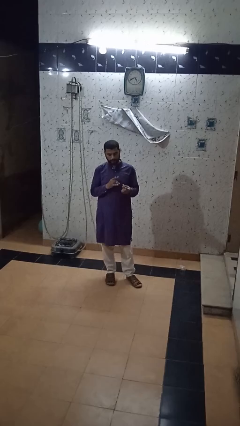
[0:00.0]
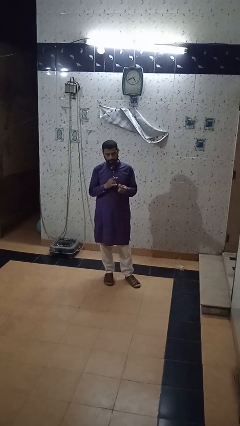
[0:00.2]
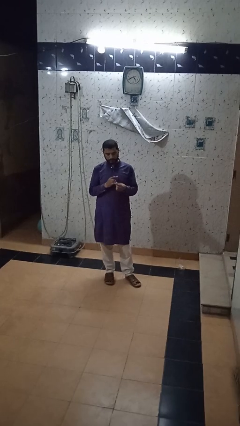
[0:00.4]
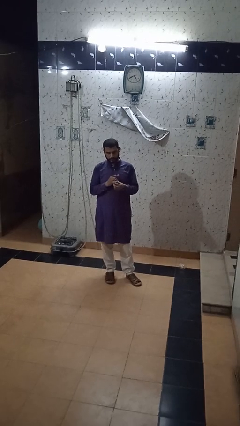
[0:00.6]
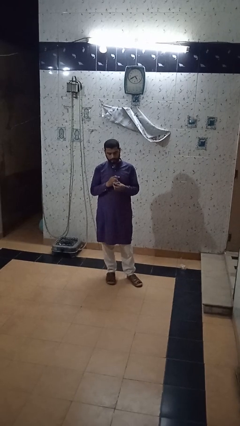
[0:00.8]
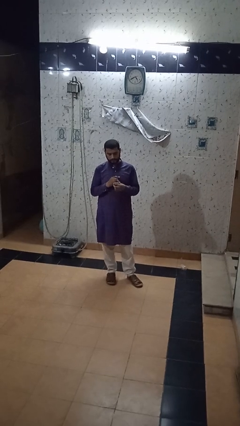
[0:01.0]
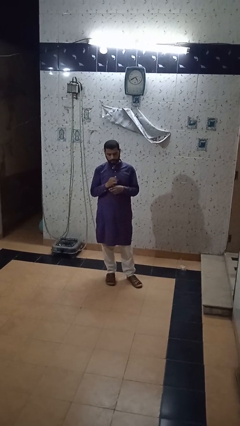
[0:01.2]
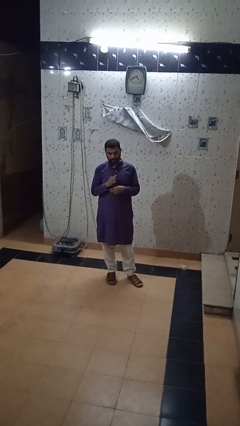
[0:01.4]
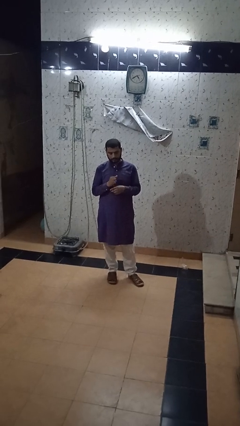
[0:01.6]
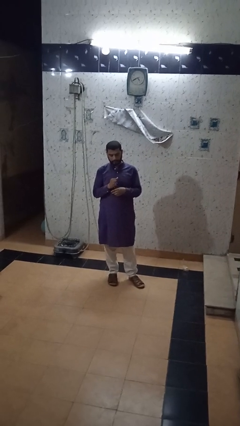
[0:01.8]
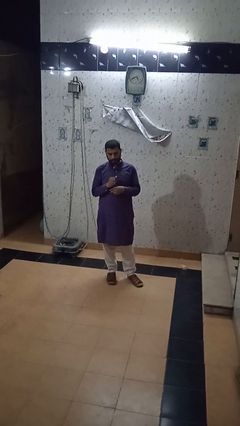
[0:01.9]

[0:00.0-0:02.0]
person puts on ring

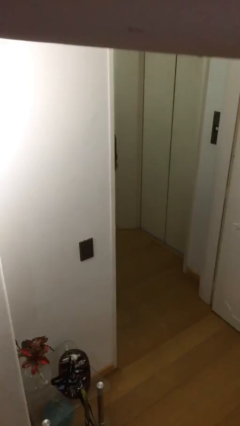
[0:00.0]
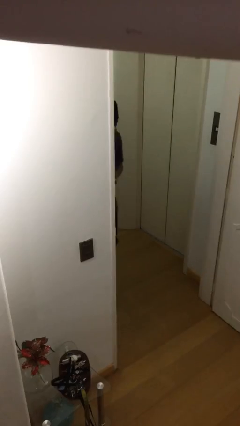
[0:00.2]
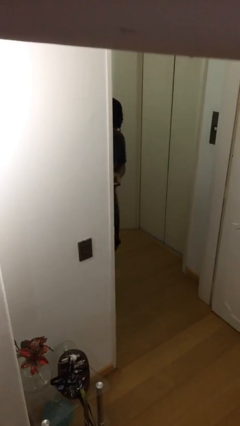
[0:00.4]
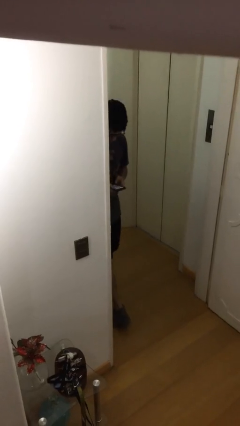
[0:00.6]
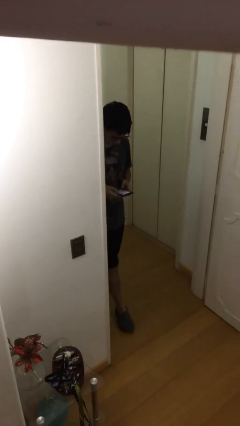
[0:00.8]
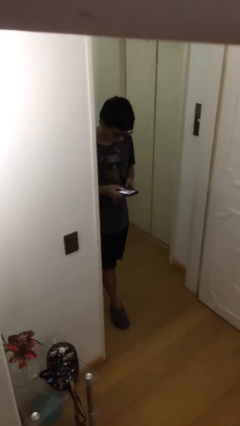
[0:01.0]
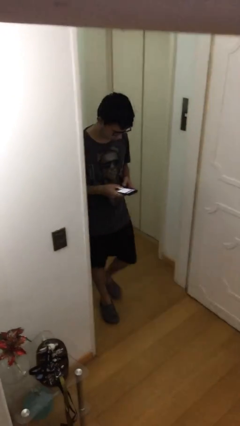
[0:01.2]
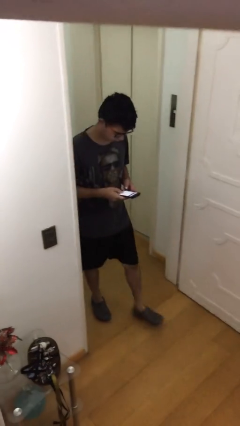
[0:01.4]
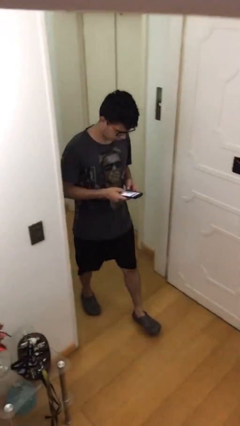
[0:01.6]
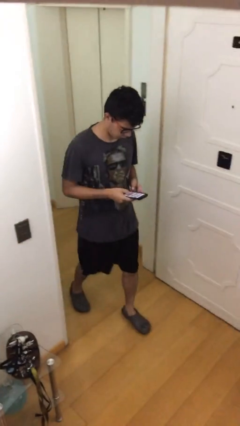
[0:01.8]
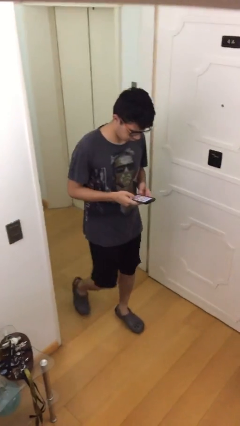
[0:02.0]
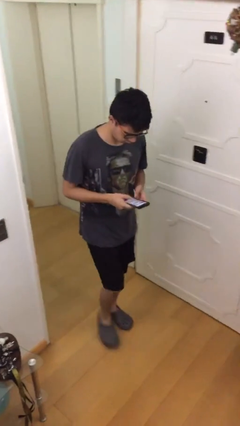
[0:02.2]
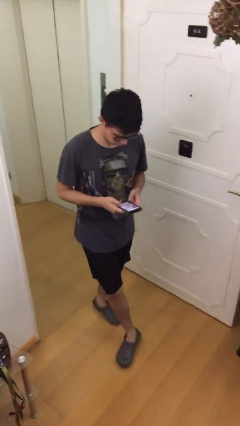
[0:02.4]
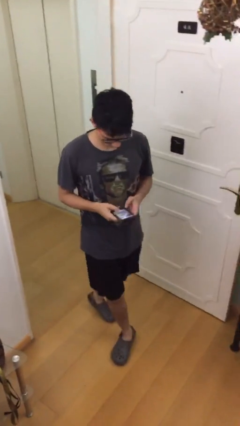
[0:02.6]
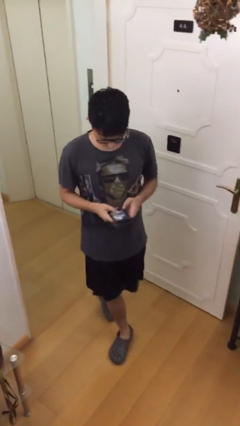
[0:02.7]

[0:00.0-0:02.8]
person enters scene through structure

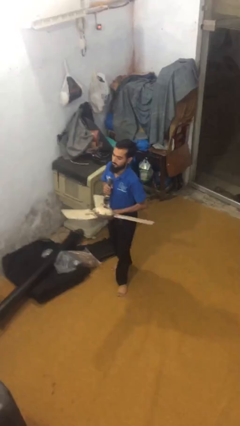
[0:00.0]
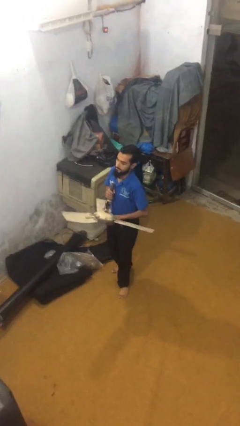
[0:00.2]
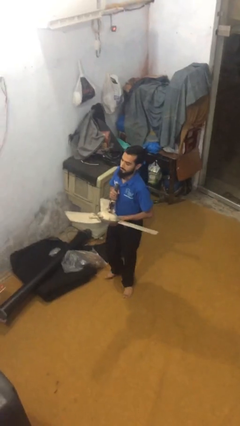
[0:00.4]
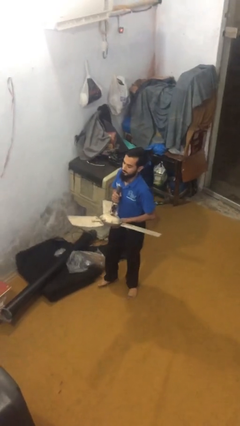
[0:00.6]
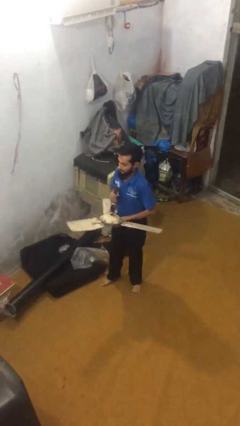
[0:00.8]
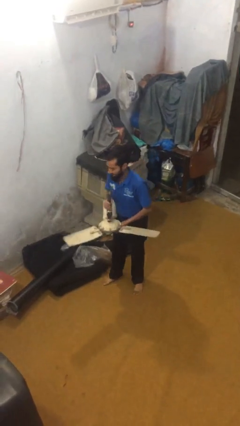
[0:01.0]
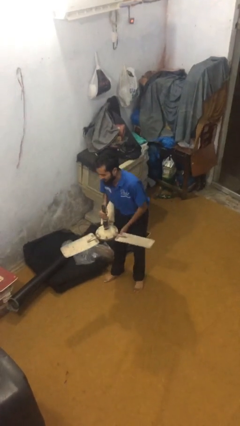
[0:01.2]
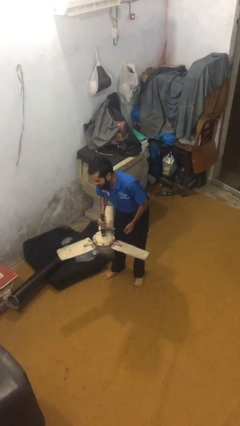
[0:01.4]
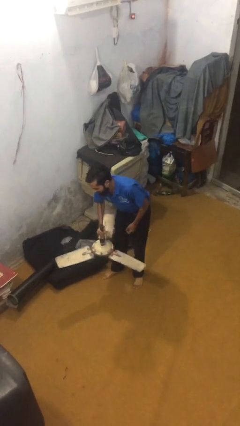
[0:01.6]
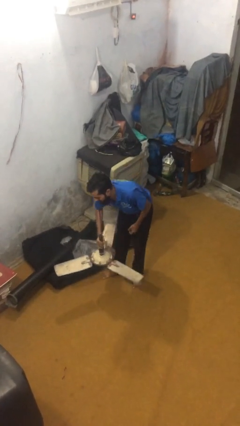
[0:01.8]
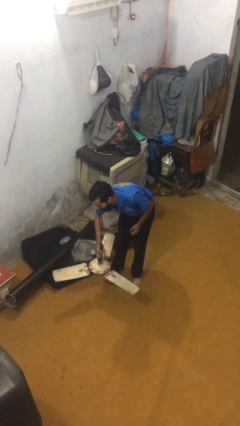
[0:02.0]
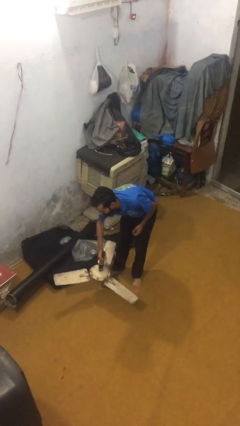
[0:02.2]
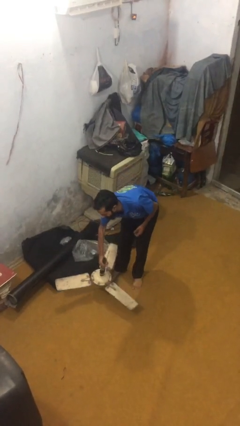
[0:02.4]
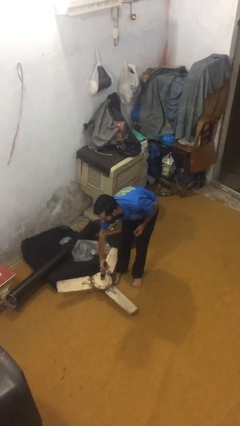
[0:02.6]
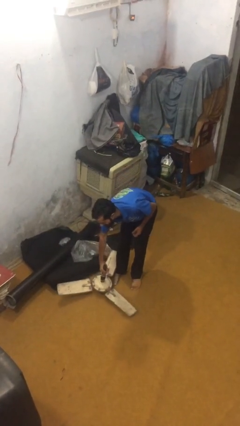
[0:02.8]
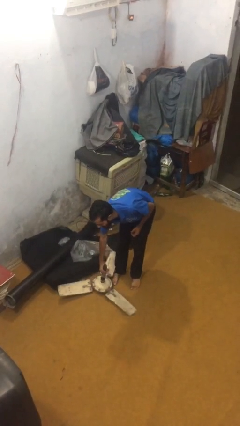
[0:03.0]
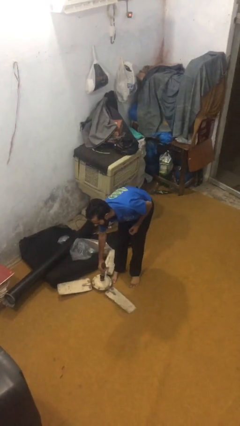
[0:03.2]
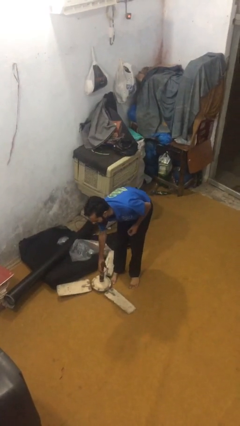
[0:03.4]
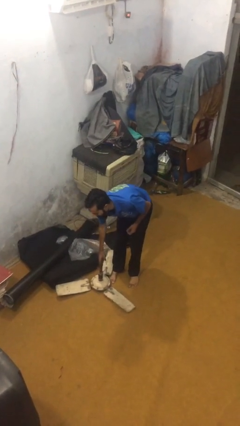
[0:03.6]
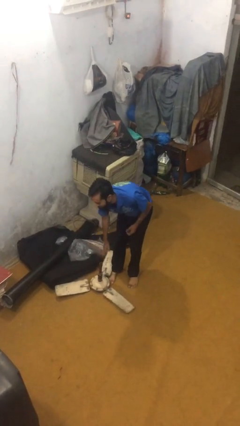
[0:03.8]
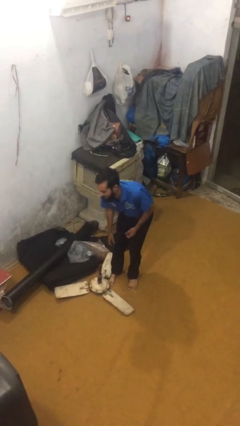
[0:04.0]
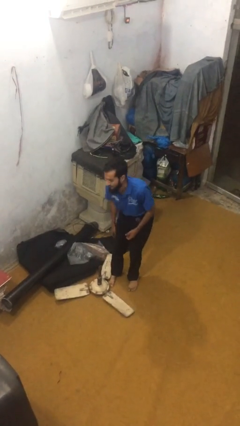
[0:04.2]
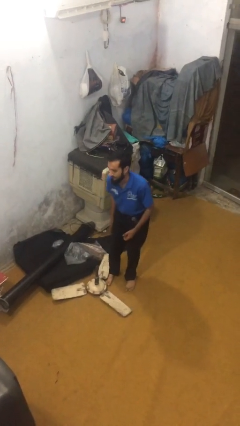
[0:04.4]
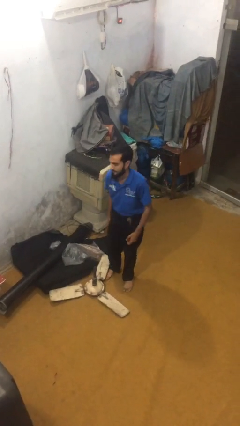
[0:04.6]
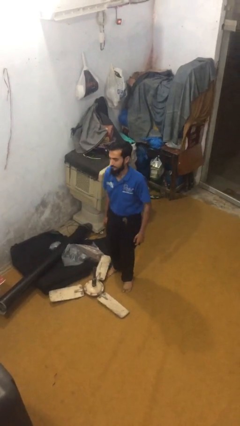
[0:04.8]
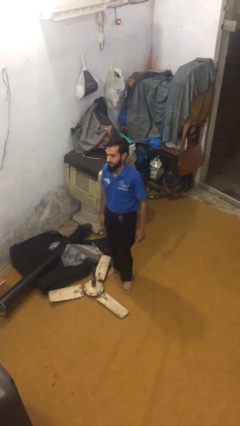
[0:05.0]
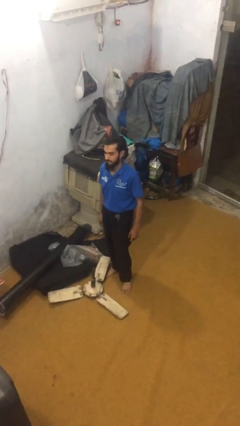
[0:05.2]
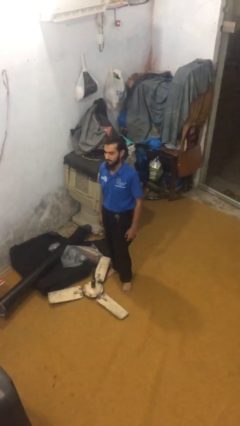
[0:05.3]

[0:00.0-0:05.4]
person puts down object on floor

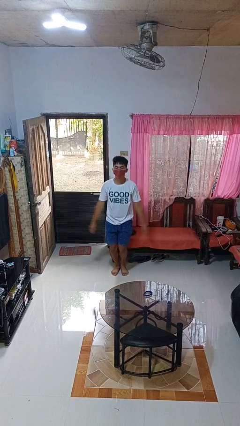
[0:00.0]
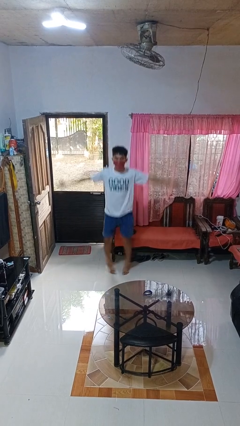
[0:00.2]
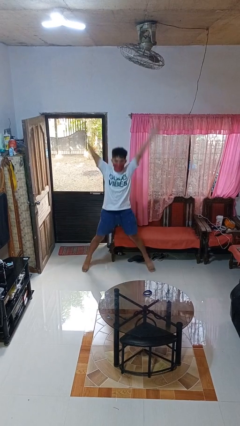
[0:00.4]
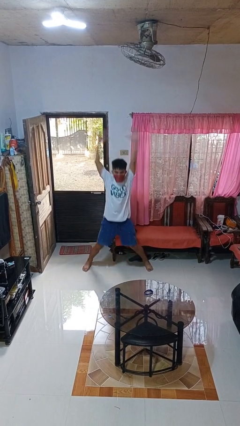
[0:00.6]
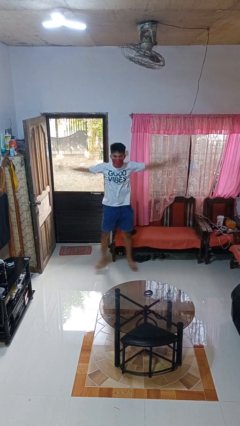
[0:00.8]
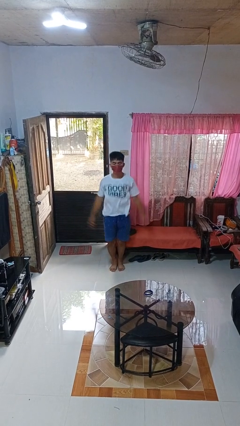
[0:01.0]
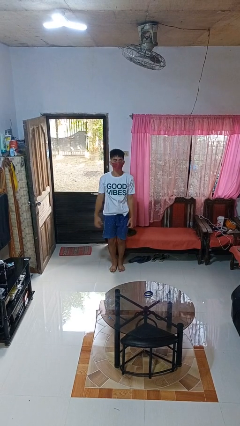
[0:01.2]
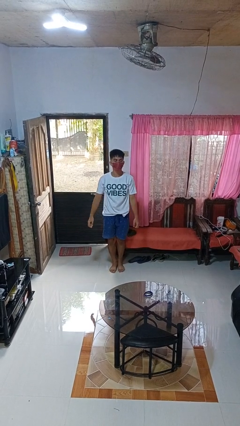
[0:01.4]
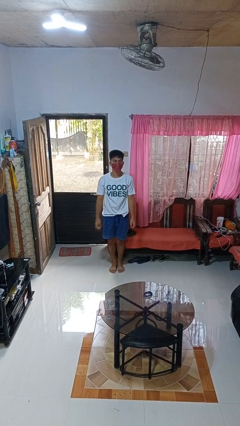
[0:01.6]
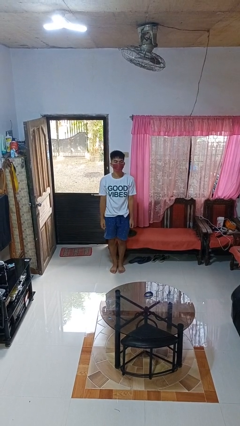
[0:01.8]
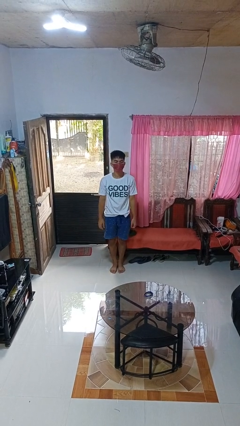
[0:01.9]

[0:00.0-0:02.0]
person exercises with jumping jacks

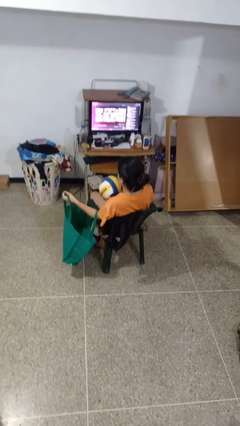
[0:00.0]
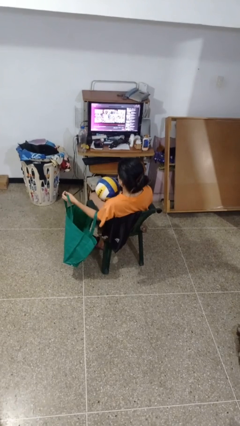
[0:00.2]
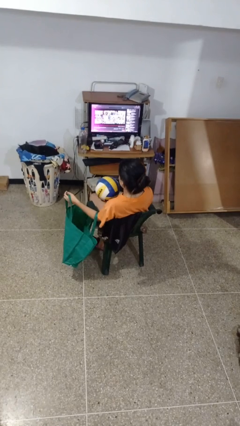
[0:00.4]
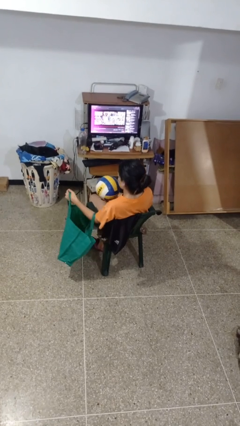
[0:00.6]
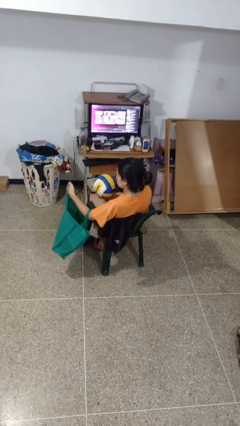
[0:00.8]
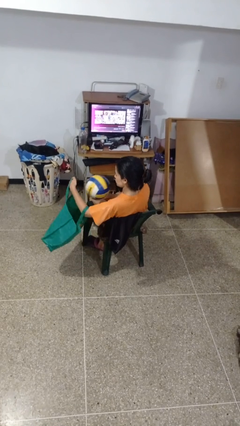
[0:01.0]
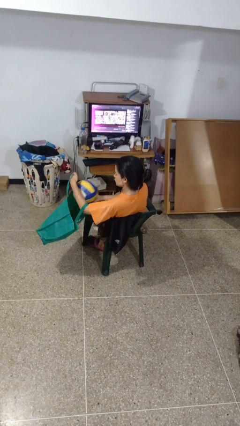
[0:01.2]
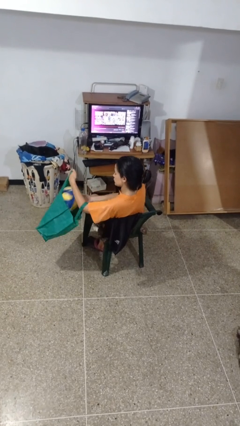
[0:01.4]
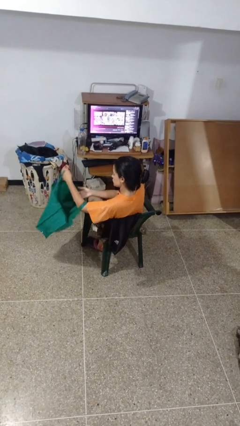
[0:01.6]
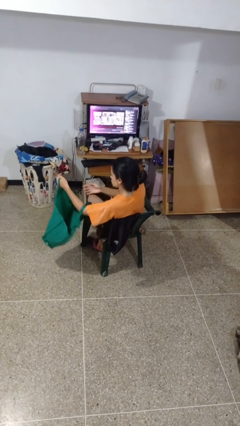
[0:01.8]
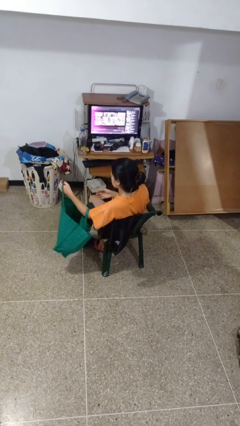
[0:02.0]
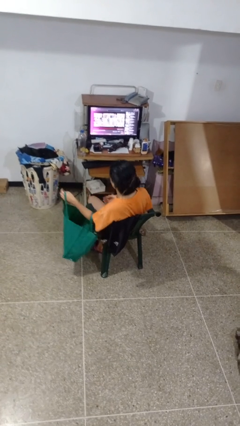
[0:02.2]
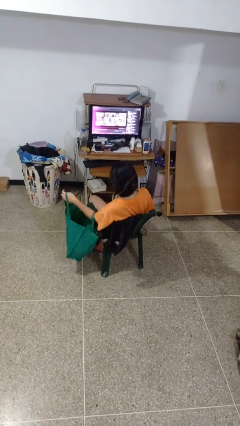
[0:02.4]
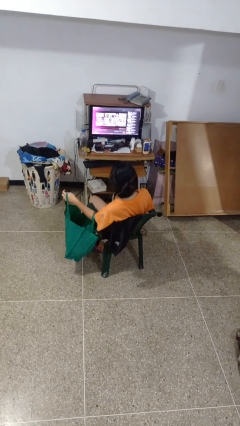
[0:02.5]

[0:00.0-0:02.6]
person puts object into bag

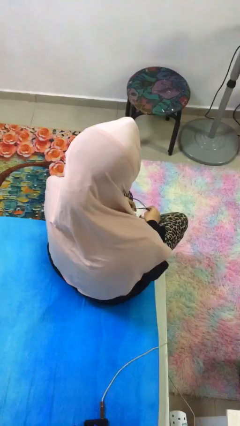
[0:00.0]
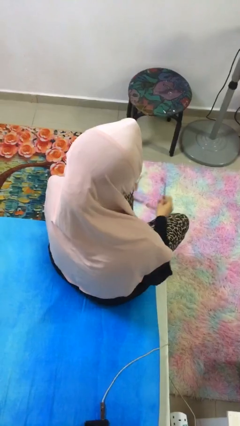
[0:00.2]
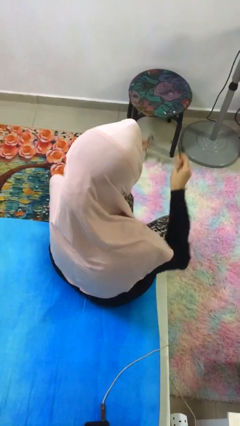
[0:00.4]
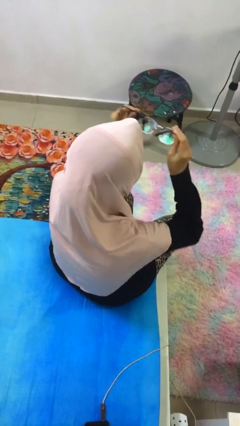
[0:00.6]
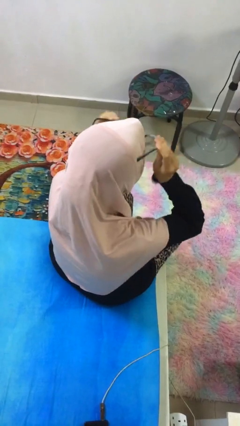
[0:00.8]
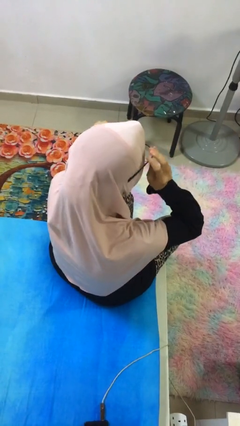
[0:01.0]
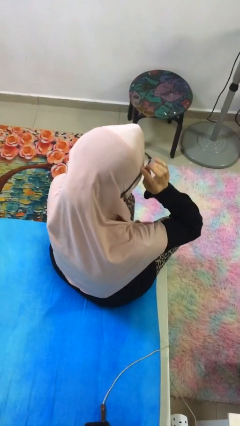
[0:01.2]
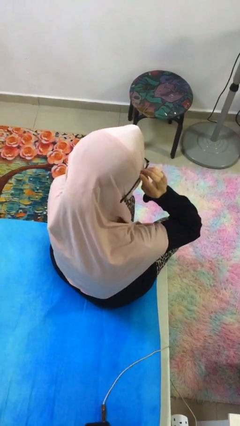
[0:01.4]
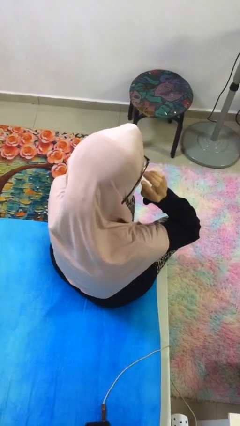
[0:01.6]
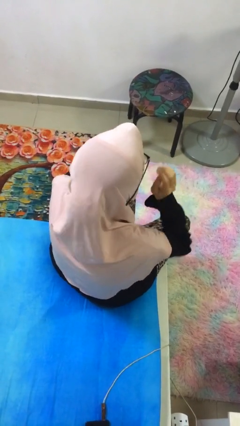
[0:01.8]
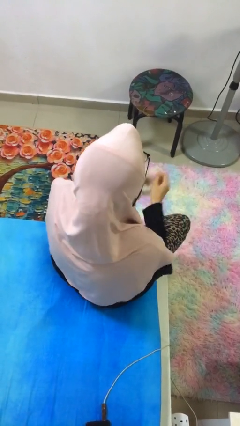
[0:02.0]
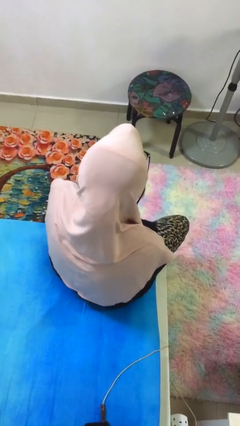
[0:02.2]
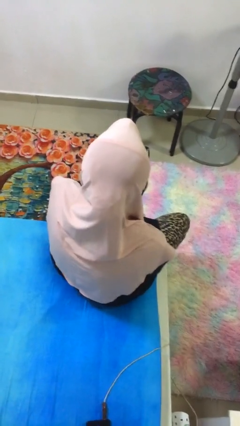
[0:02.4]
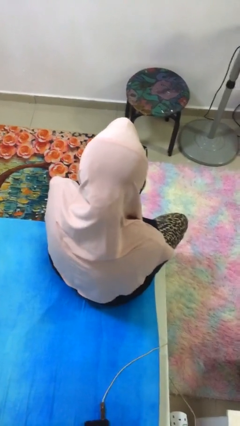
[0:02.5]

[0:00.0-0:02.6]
person puts on glasses

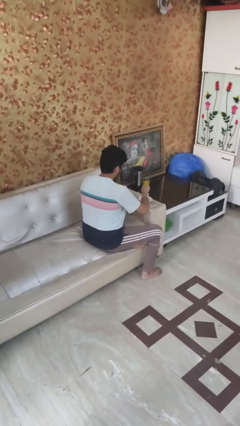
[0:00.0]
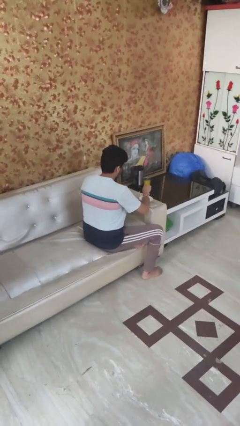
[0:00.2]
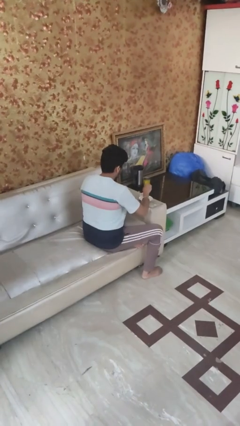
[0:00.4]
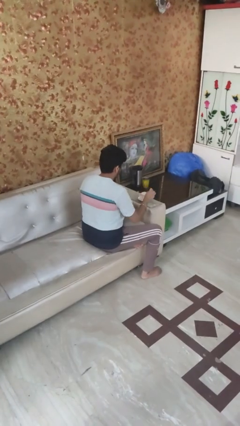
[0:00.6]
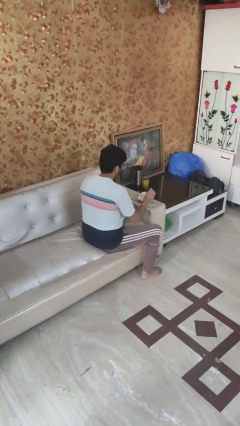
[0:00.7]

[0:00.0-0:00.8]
person stirs mug
